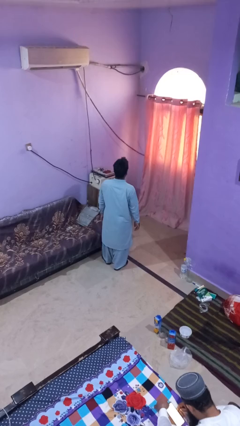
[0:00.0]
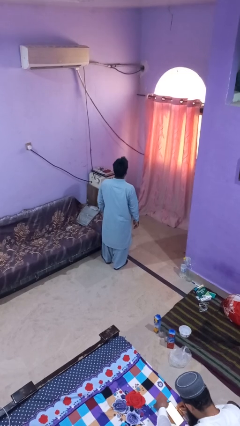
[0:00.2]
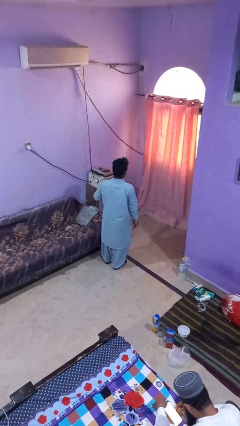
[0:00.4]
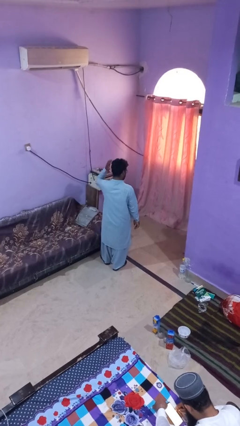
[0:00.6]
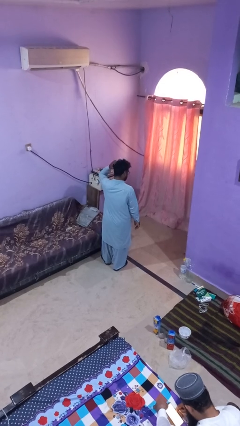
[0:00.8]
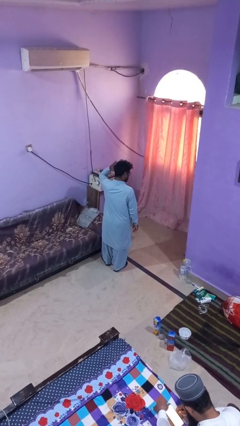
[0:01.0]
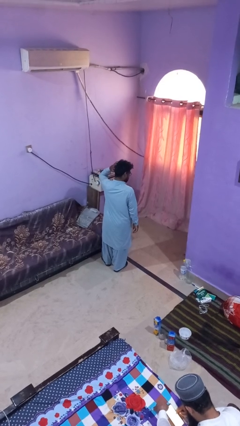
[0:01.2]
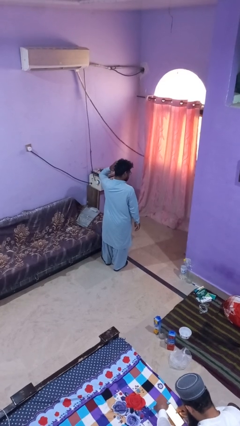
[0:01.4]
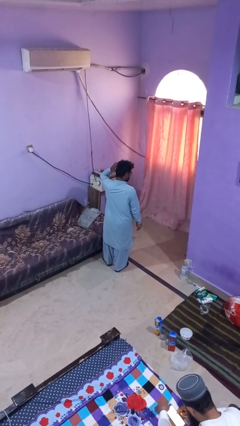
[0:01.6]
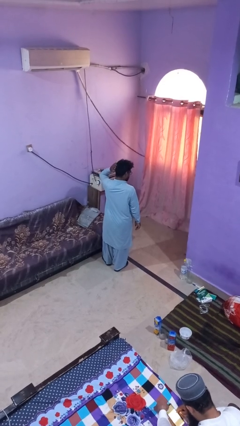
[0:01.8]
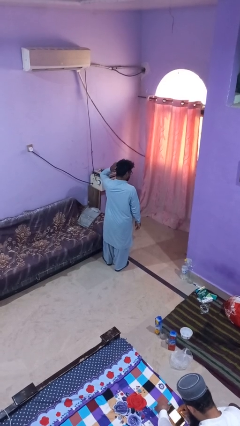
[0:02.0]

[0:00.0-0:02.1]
person scratches face

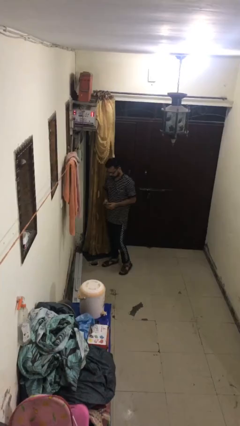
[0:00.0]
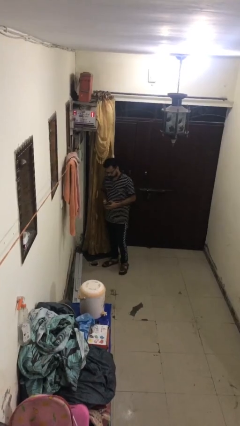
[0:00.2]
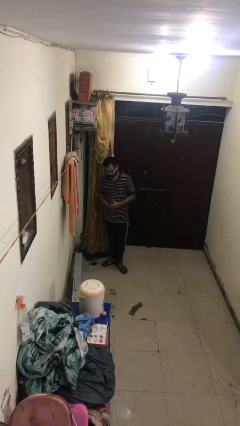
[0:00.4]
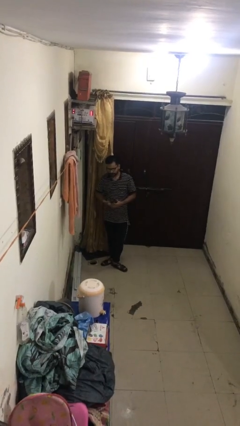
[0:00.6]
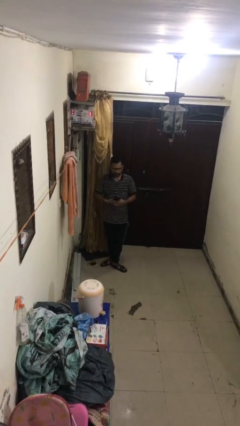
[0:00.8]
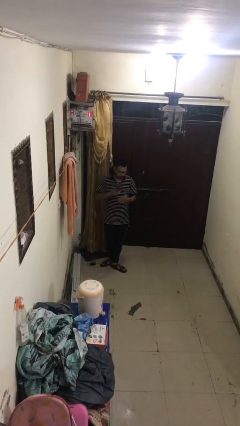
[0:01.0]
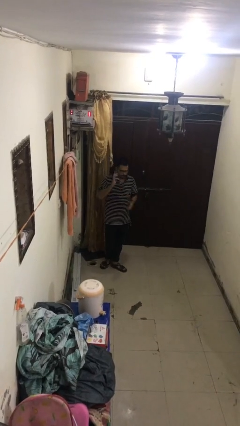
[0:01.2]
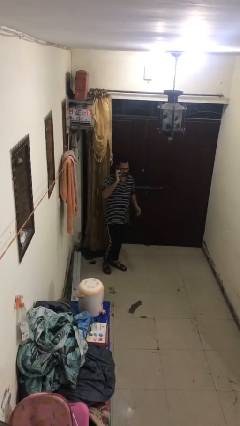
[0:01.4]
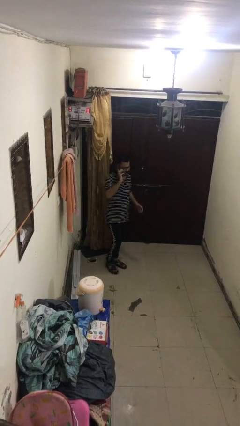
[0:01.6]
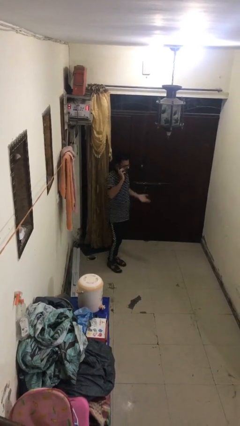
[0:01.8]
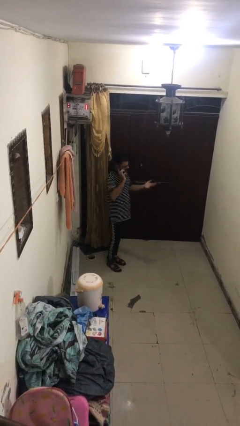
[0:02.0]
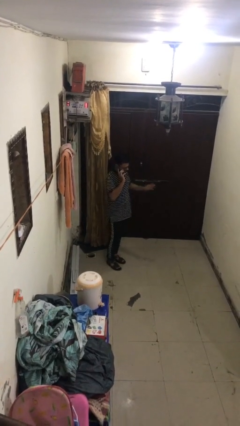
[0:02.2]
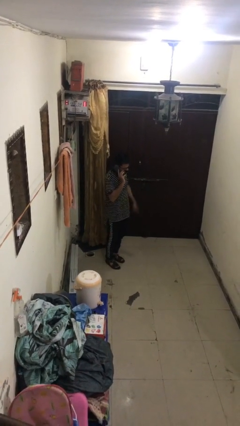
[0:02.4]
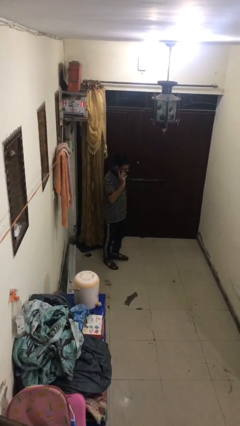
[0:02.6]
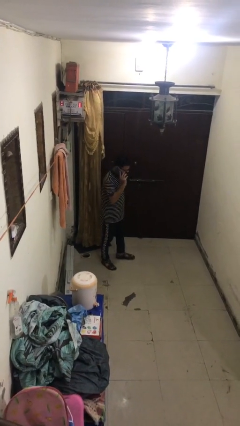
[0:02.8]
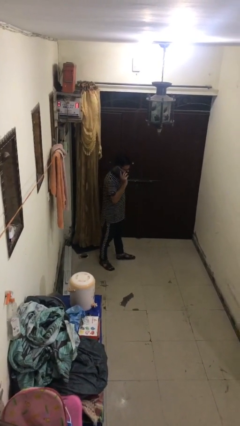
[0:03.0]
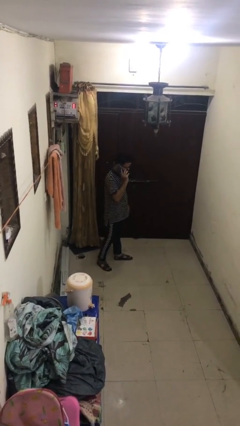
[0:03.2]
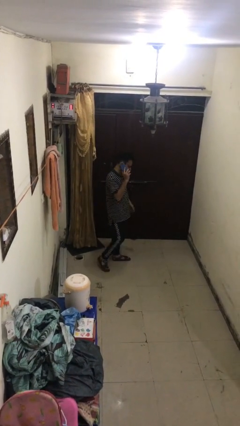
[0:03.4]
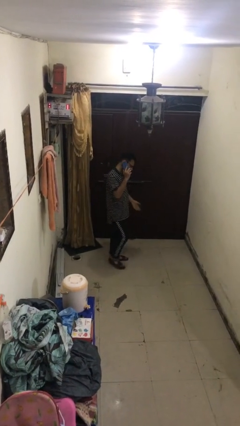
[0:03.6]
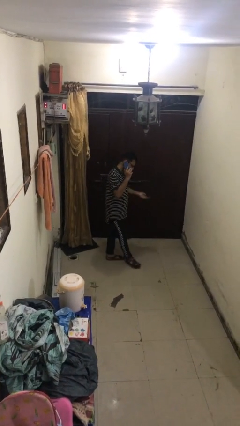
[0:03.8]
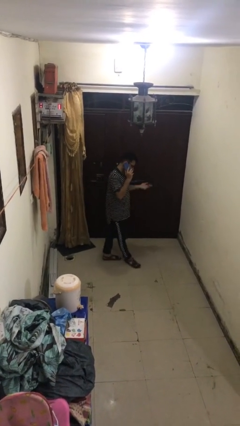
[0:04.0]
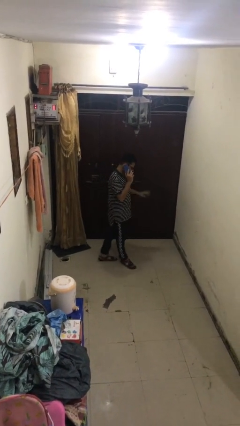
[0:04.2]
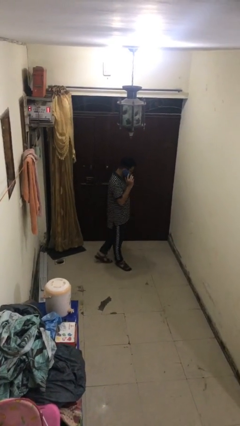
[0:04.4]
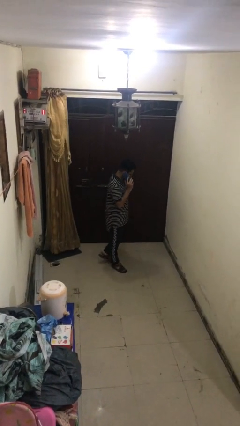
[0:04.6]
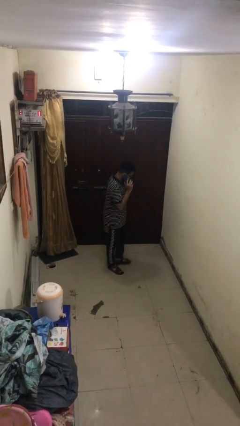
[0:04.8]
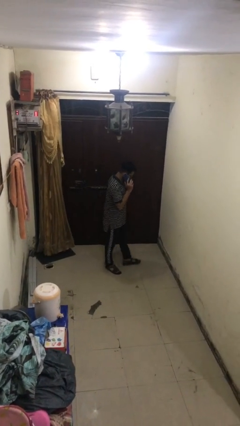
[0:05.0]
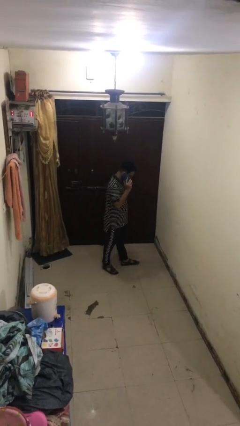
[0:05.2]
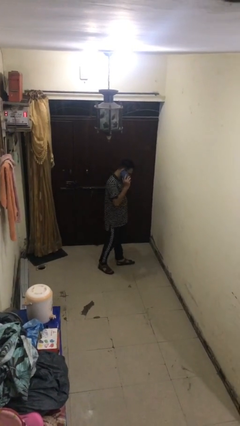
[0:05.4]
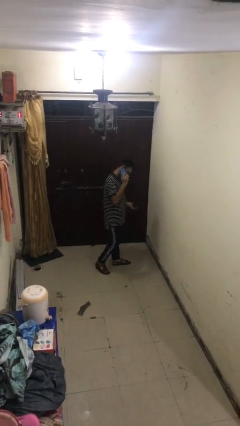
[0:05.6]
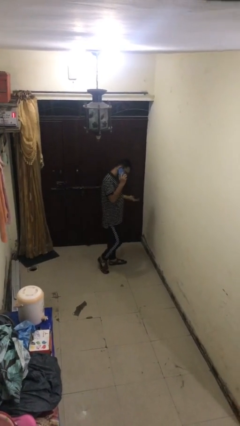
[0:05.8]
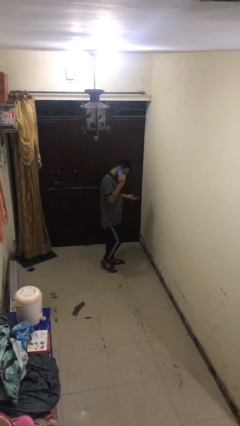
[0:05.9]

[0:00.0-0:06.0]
person talks on phone

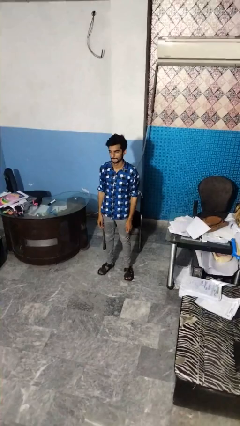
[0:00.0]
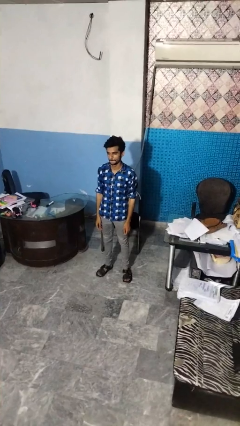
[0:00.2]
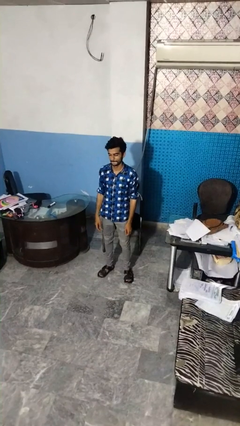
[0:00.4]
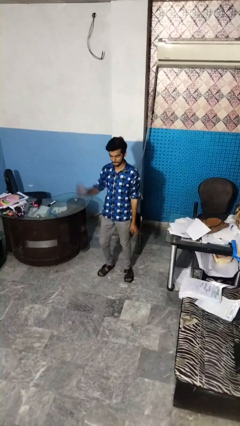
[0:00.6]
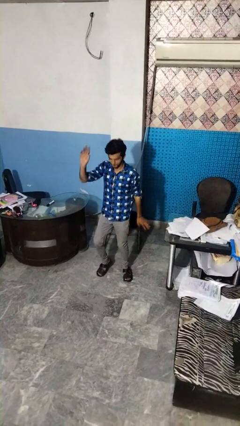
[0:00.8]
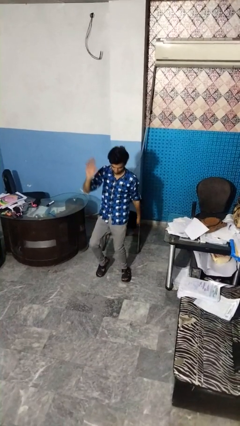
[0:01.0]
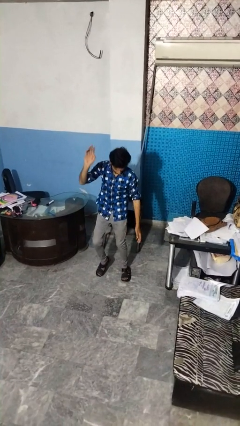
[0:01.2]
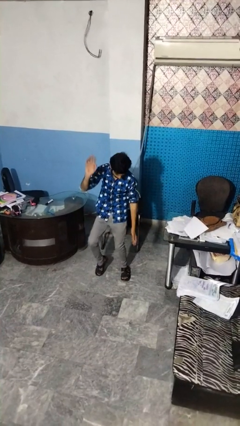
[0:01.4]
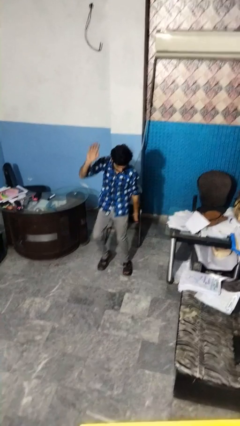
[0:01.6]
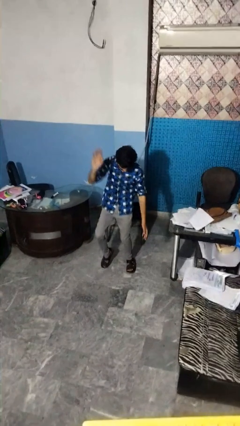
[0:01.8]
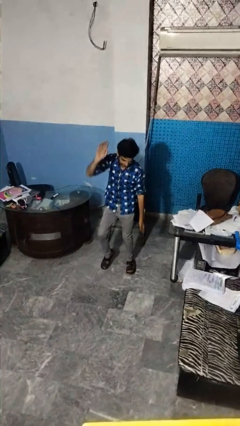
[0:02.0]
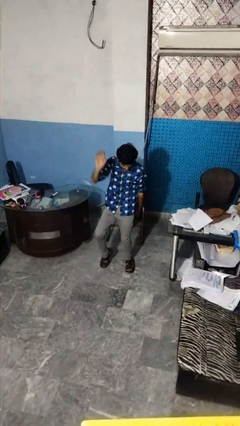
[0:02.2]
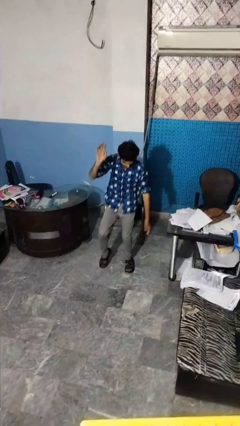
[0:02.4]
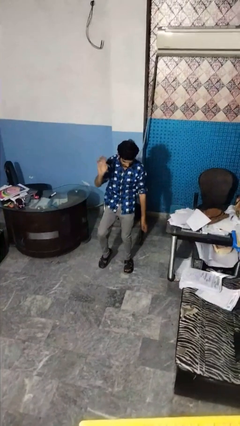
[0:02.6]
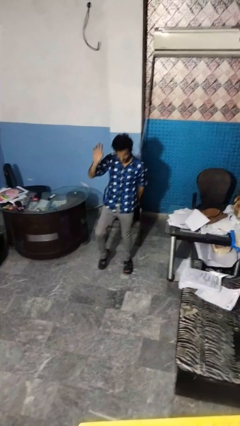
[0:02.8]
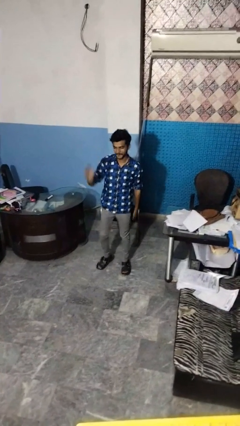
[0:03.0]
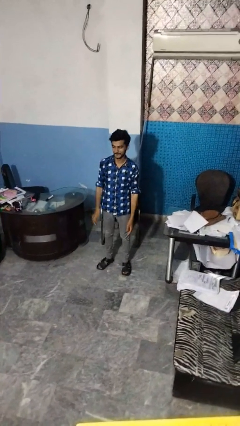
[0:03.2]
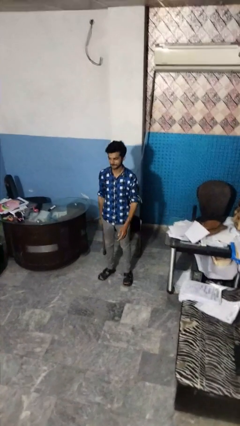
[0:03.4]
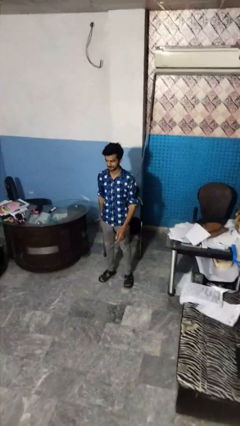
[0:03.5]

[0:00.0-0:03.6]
person dances in place

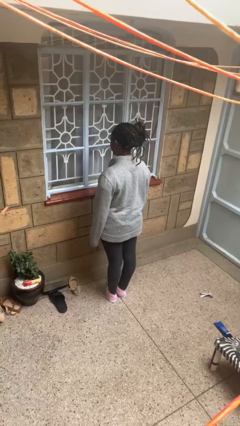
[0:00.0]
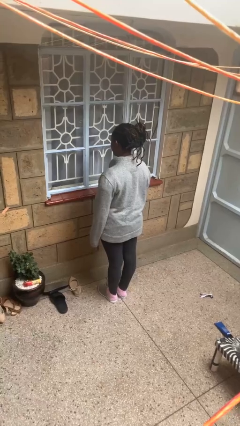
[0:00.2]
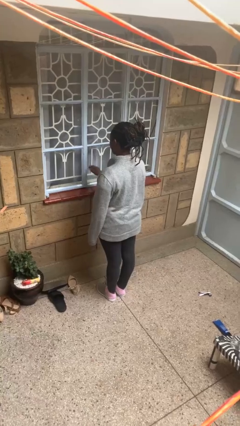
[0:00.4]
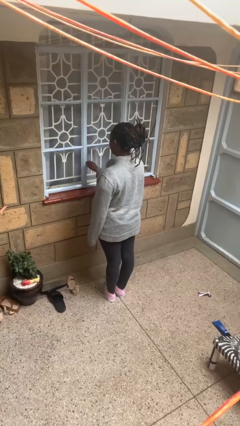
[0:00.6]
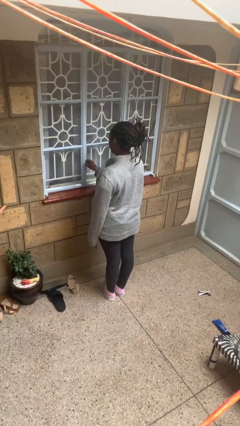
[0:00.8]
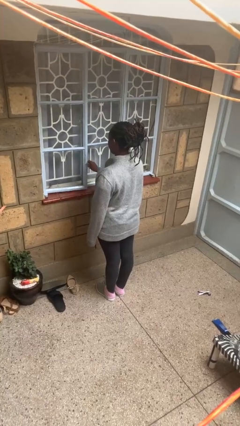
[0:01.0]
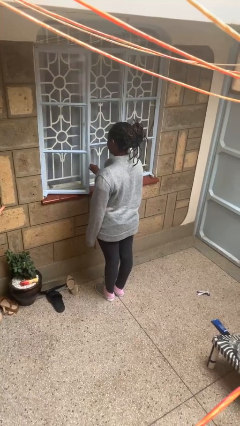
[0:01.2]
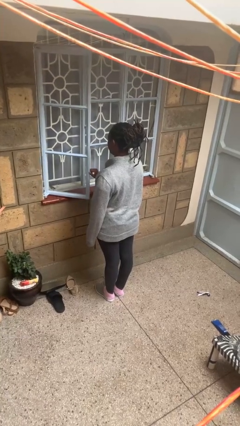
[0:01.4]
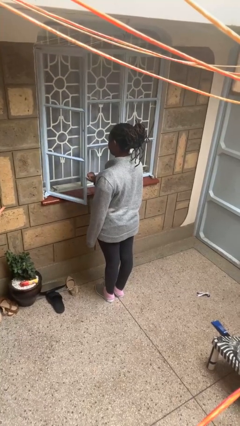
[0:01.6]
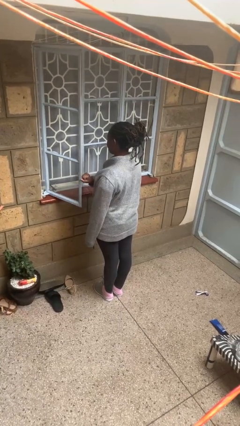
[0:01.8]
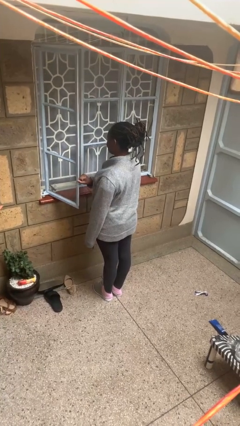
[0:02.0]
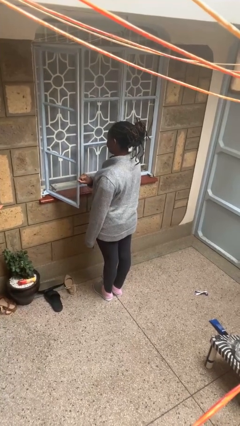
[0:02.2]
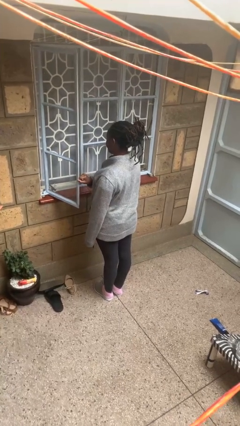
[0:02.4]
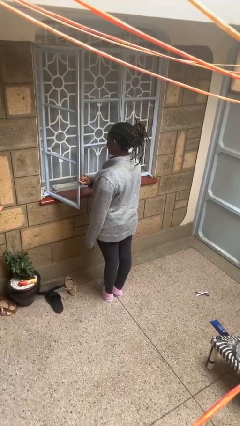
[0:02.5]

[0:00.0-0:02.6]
person opens home window

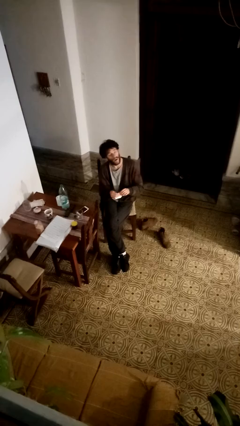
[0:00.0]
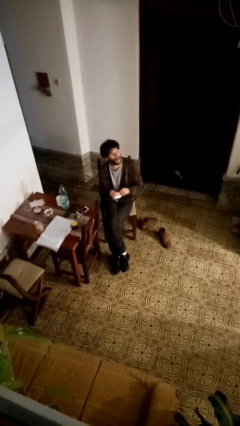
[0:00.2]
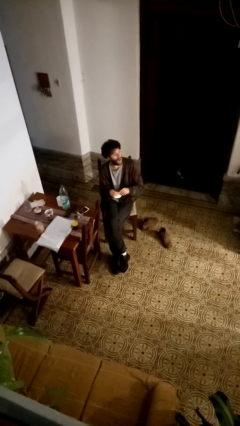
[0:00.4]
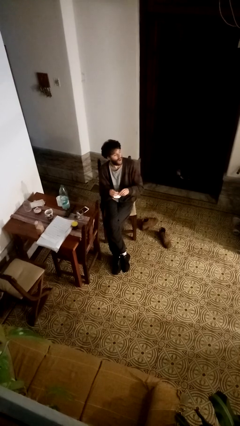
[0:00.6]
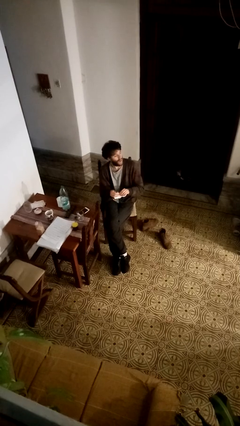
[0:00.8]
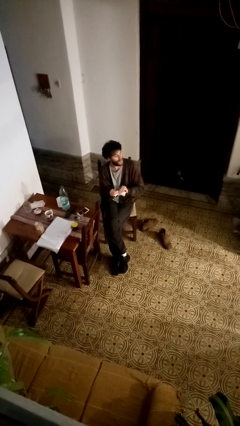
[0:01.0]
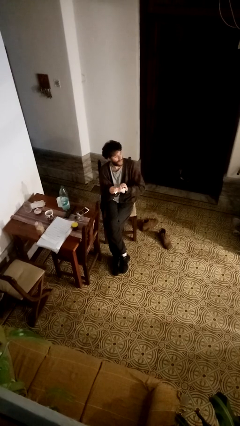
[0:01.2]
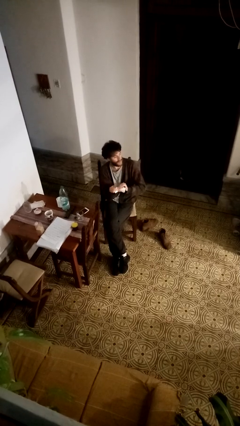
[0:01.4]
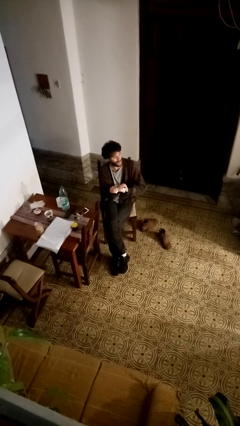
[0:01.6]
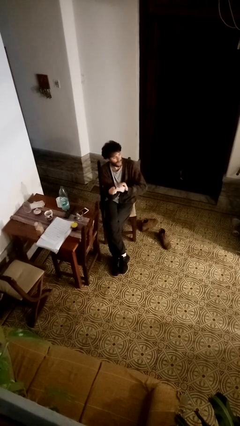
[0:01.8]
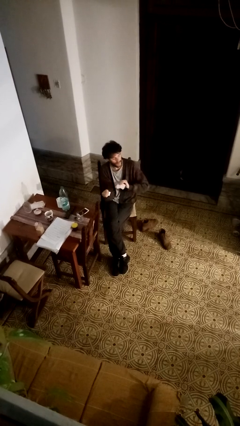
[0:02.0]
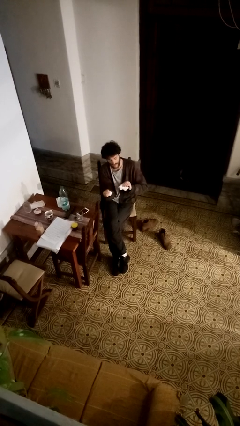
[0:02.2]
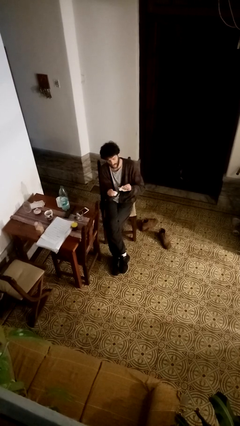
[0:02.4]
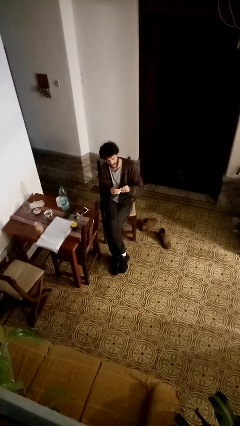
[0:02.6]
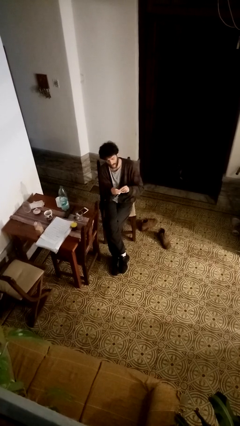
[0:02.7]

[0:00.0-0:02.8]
person tears paper

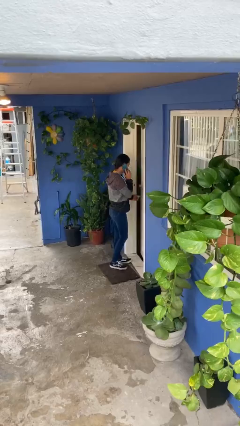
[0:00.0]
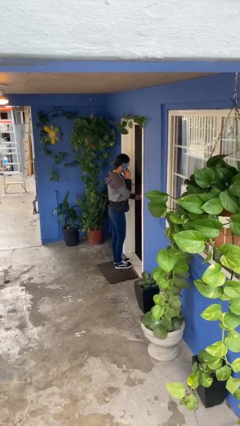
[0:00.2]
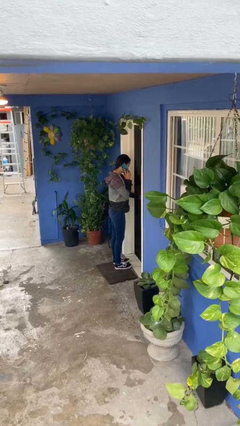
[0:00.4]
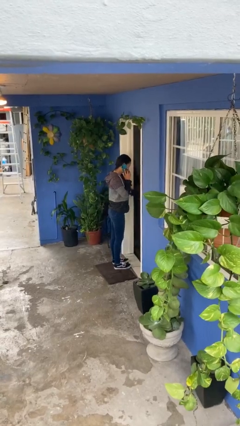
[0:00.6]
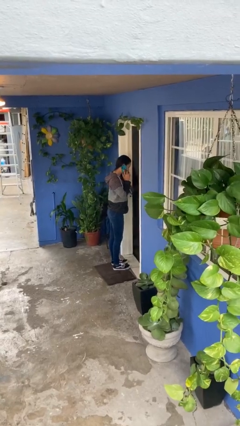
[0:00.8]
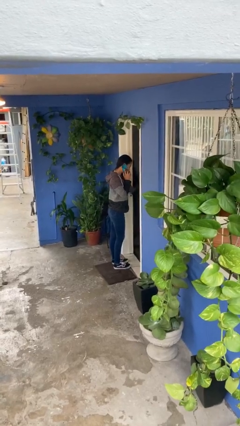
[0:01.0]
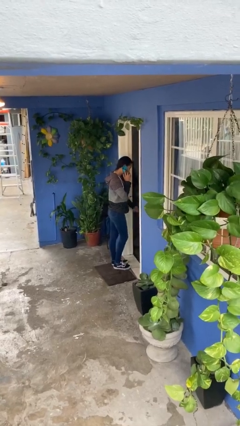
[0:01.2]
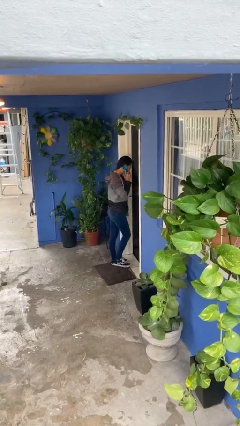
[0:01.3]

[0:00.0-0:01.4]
person opens facility door
